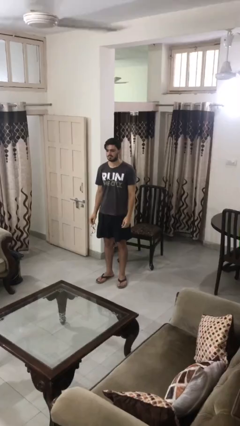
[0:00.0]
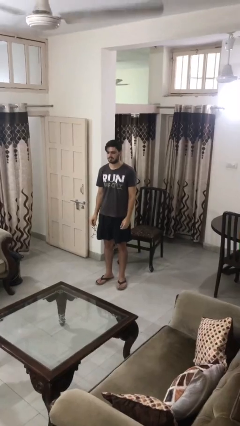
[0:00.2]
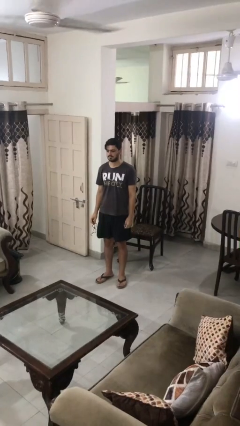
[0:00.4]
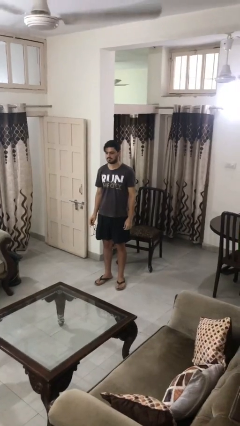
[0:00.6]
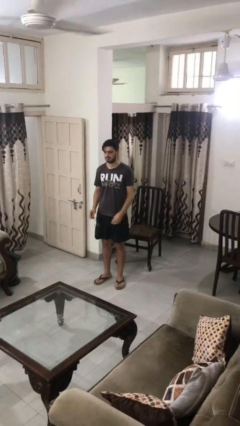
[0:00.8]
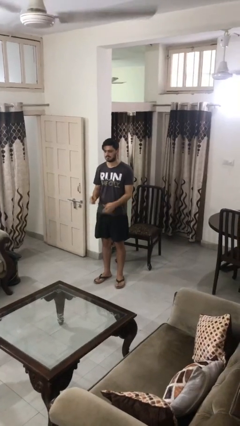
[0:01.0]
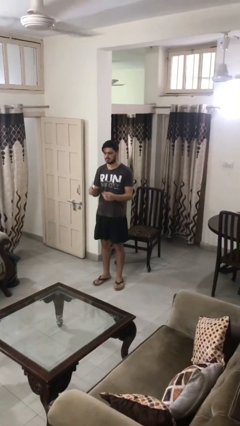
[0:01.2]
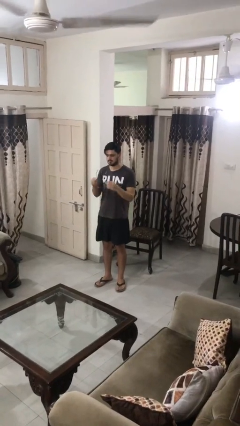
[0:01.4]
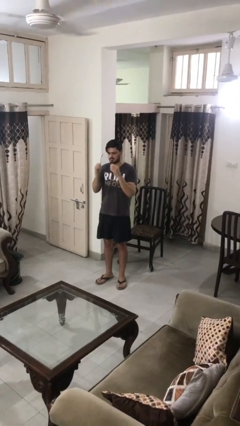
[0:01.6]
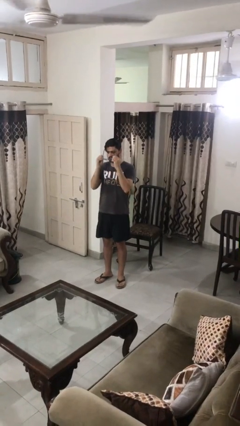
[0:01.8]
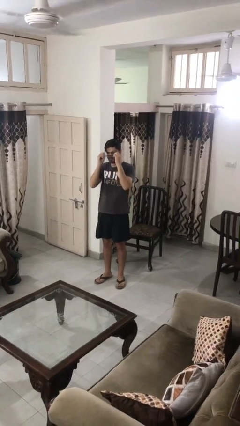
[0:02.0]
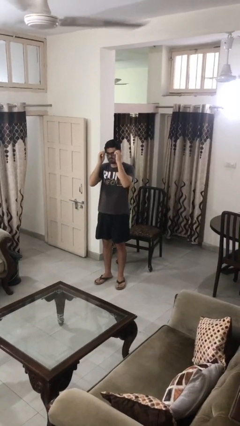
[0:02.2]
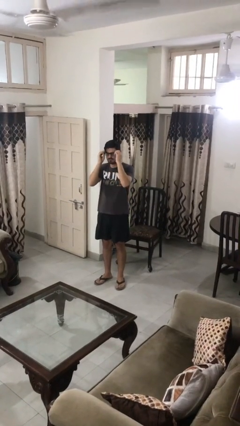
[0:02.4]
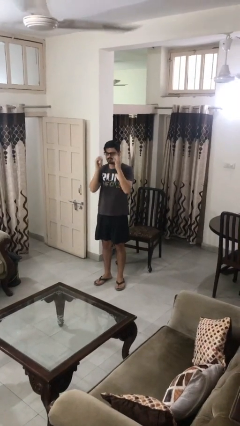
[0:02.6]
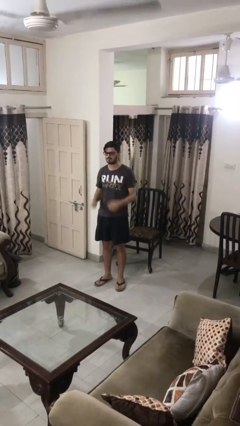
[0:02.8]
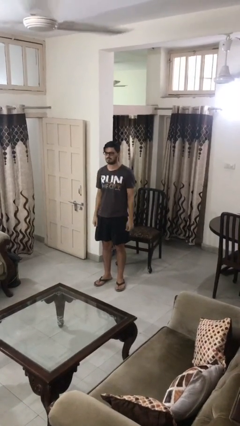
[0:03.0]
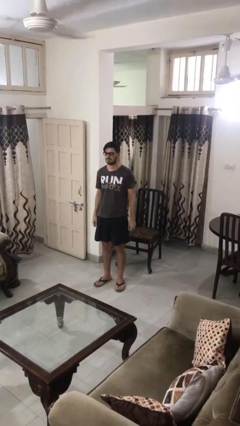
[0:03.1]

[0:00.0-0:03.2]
person puts on glasses

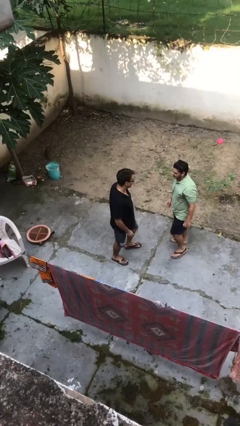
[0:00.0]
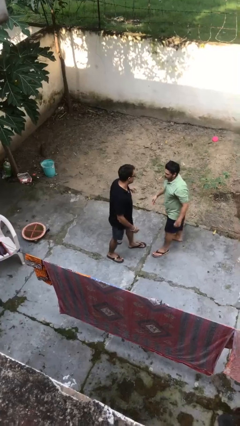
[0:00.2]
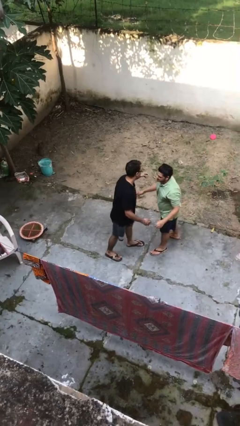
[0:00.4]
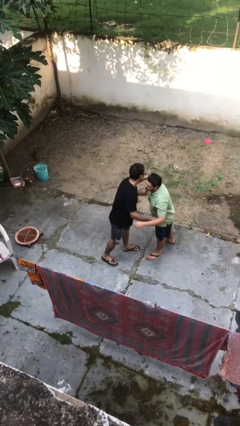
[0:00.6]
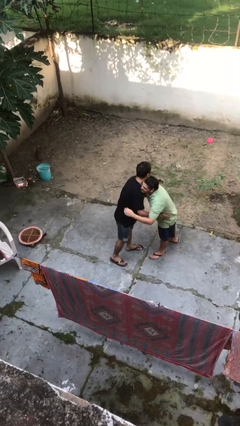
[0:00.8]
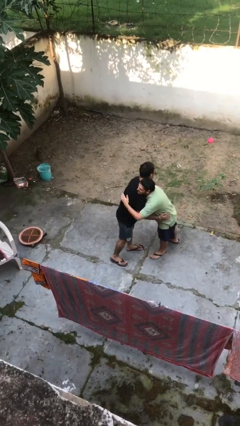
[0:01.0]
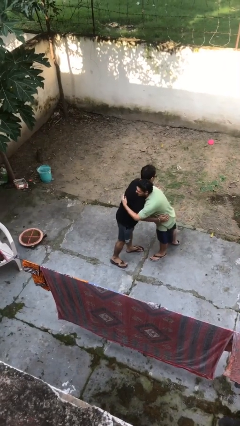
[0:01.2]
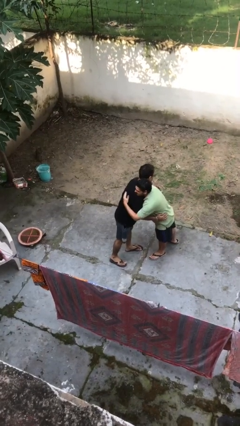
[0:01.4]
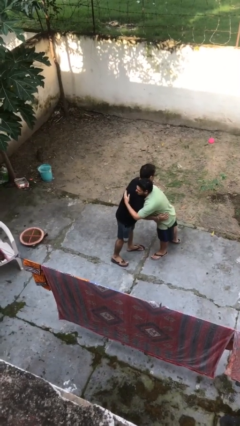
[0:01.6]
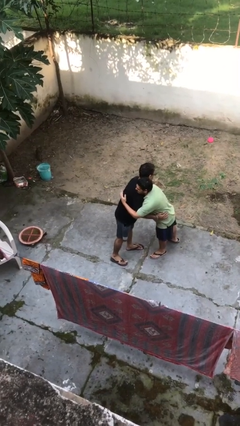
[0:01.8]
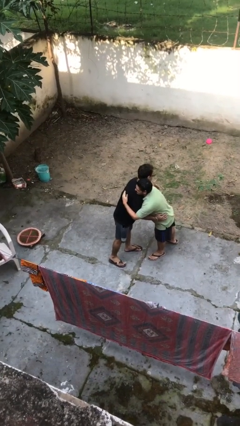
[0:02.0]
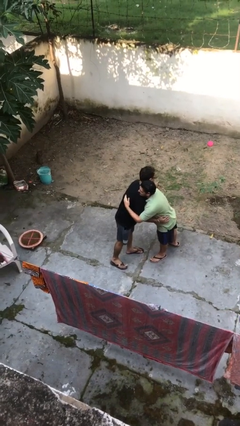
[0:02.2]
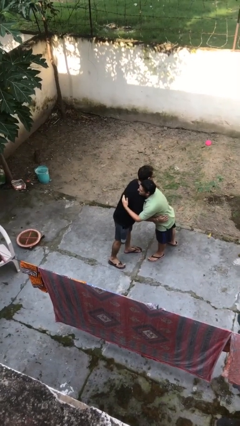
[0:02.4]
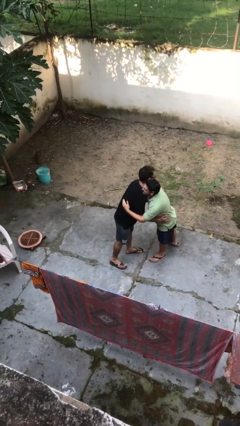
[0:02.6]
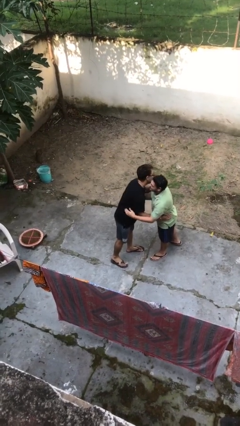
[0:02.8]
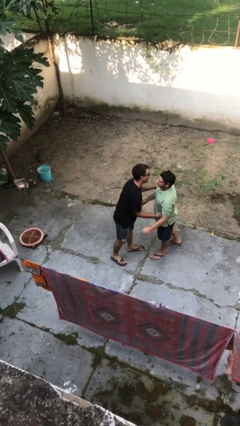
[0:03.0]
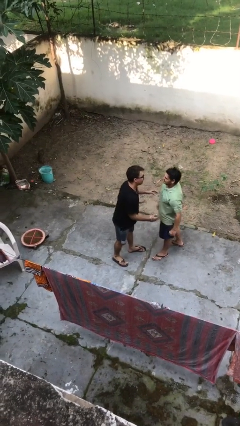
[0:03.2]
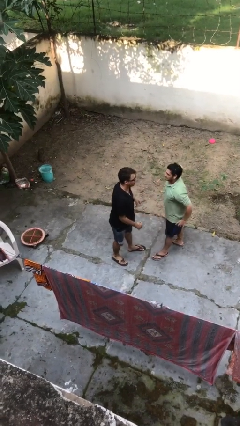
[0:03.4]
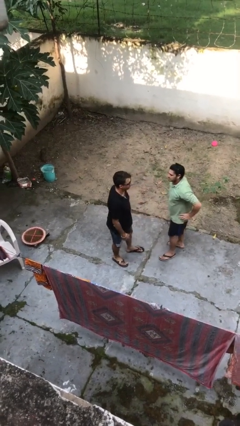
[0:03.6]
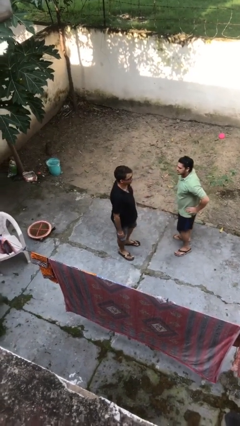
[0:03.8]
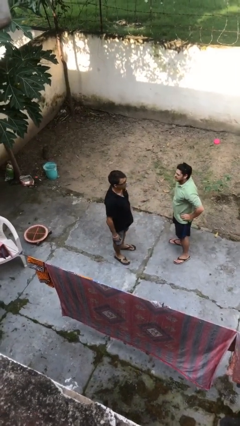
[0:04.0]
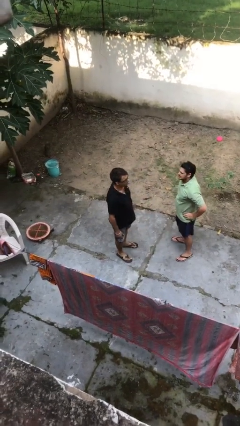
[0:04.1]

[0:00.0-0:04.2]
person embraces person

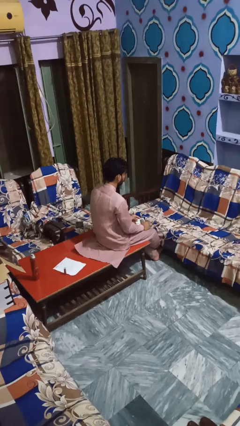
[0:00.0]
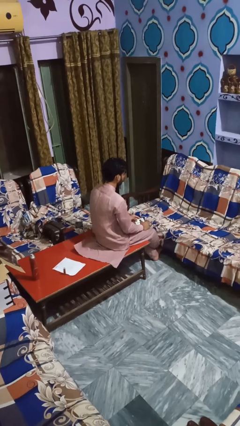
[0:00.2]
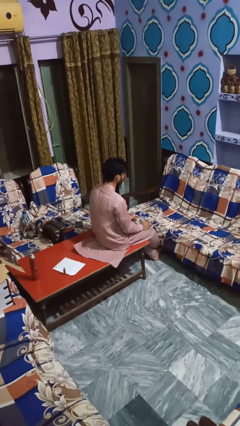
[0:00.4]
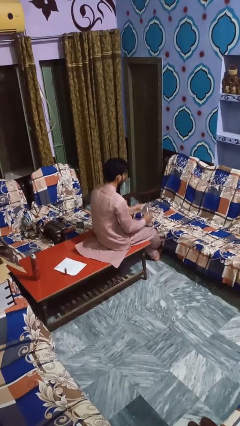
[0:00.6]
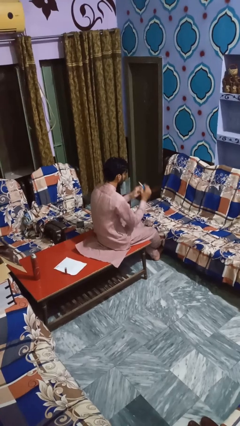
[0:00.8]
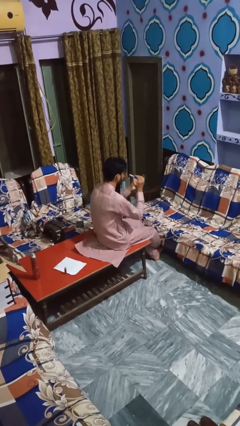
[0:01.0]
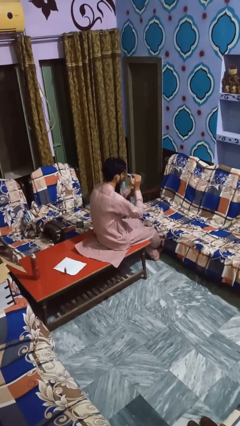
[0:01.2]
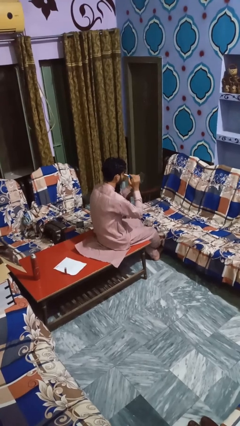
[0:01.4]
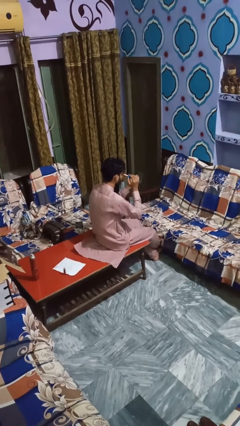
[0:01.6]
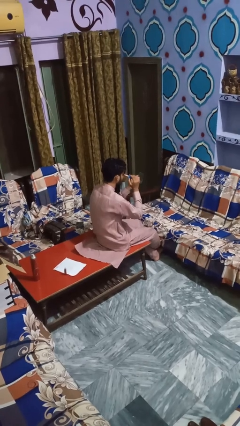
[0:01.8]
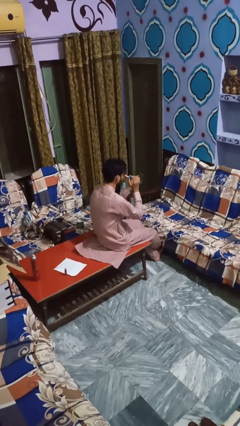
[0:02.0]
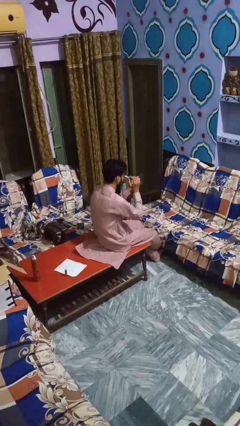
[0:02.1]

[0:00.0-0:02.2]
person applies eye makeup

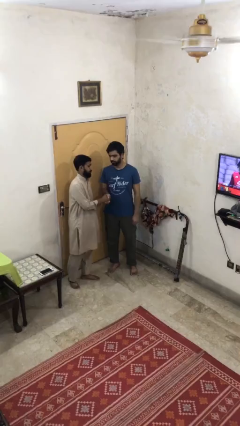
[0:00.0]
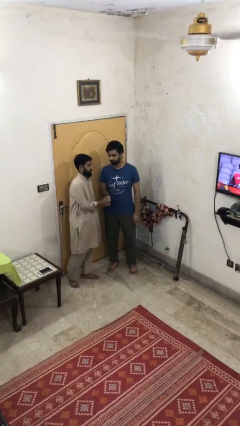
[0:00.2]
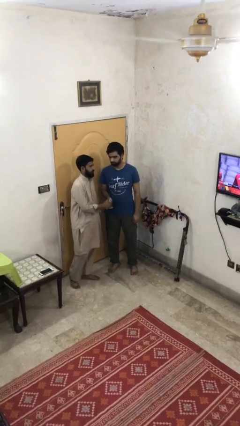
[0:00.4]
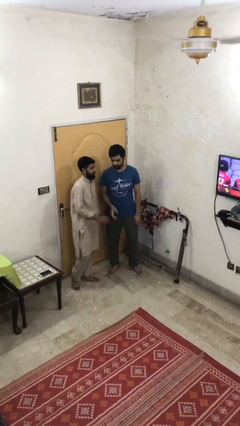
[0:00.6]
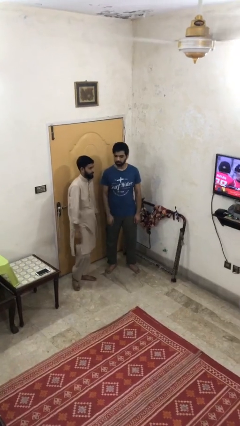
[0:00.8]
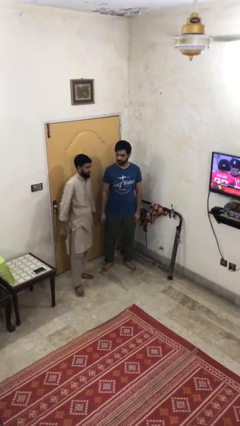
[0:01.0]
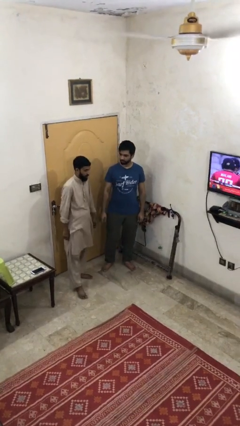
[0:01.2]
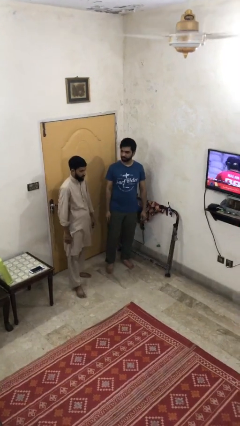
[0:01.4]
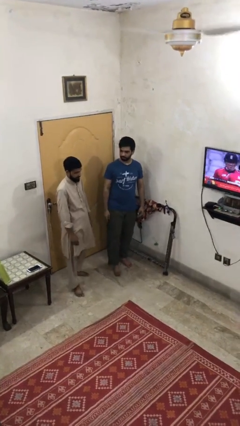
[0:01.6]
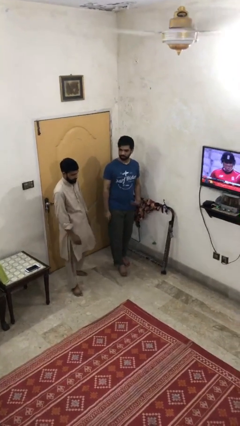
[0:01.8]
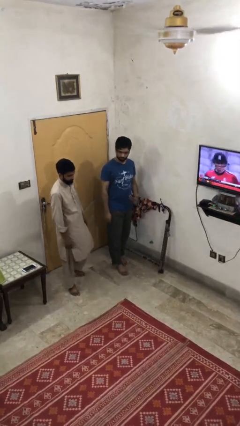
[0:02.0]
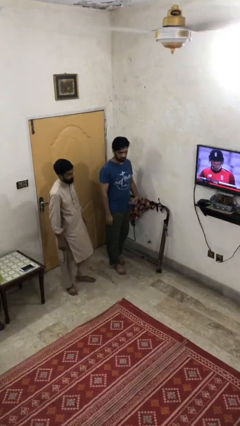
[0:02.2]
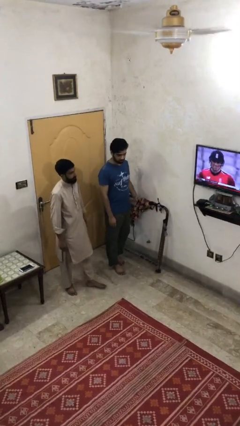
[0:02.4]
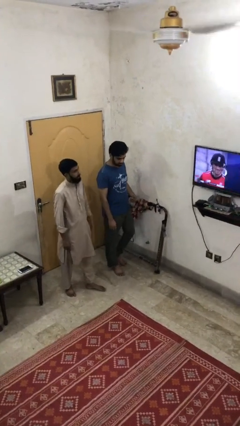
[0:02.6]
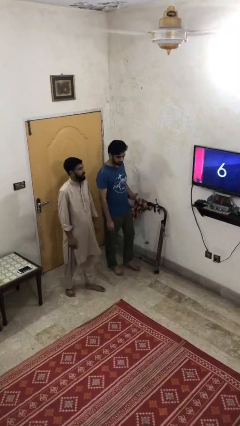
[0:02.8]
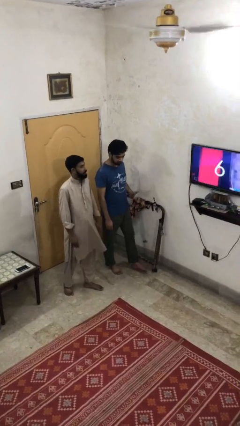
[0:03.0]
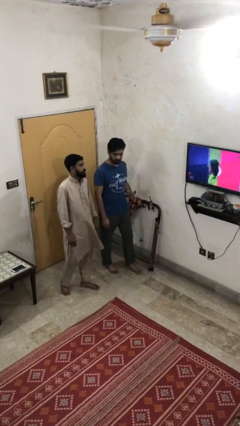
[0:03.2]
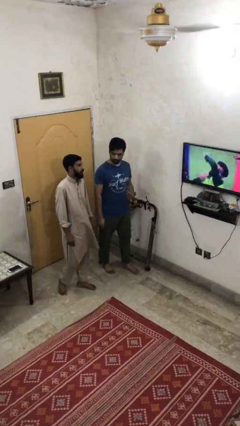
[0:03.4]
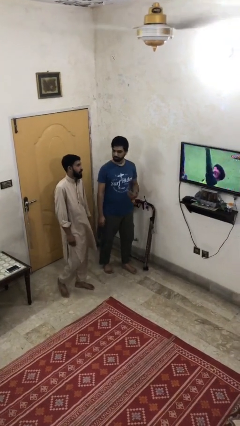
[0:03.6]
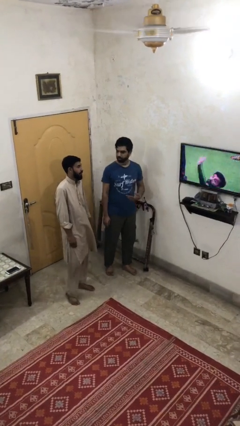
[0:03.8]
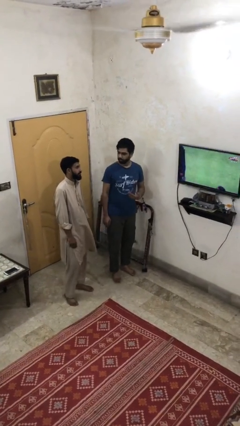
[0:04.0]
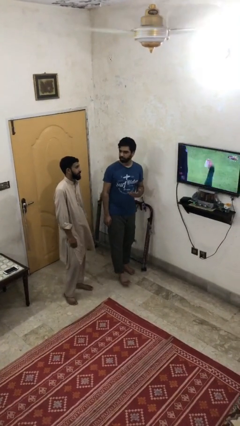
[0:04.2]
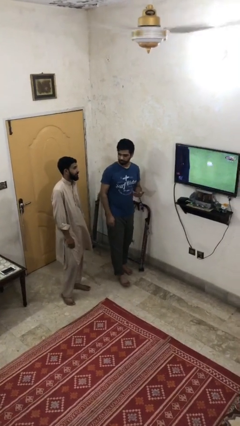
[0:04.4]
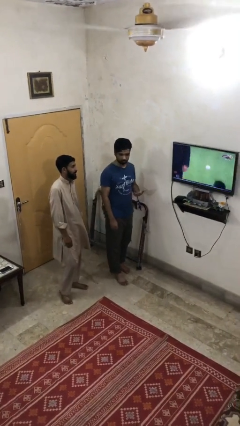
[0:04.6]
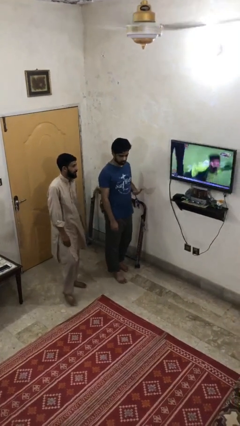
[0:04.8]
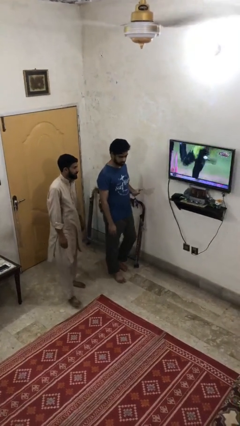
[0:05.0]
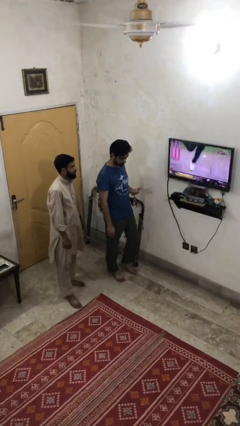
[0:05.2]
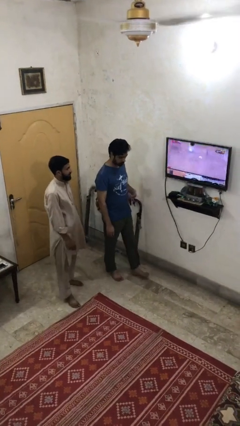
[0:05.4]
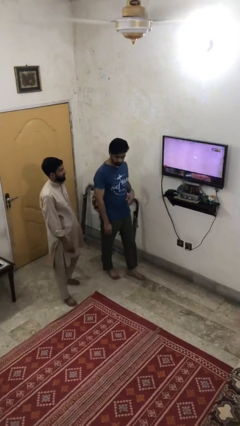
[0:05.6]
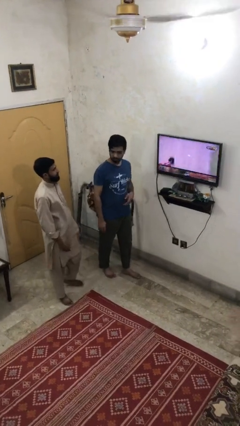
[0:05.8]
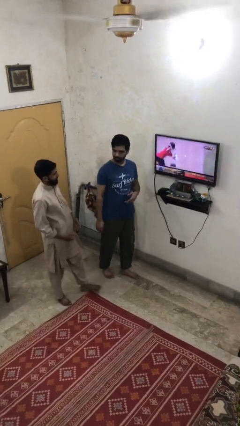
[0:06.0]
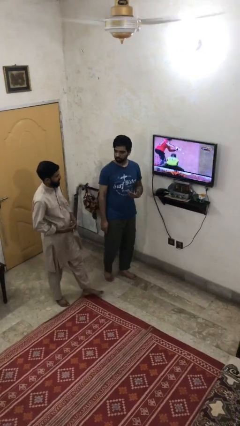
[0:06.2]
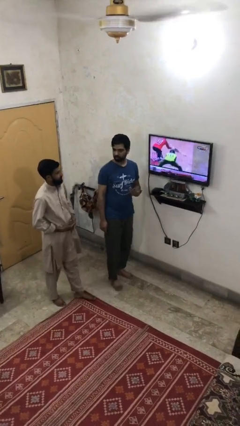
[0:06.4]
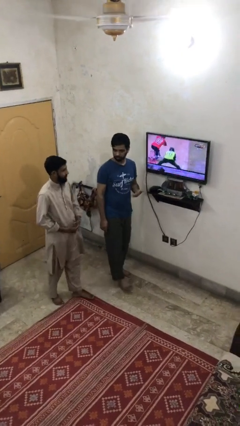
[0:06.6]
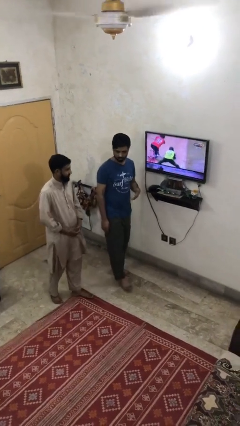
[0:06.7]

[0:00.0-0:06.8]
person talks to person

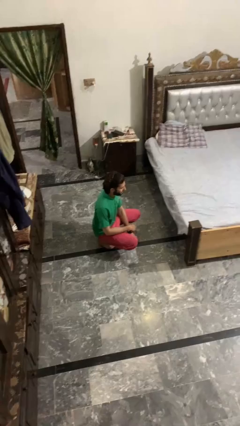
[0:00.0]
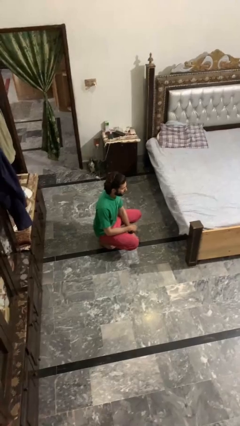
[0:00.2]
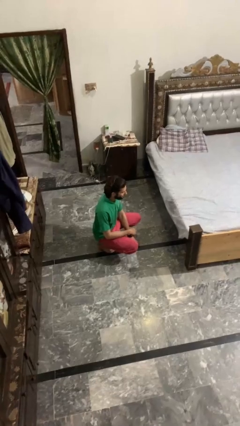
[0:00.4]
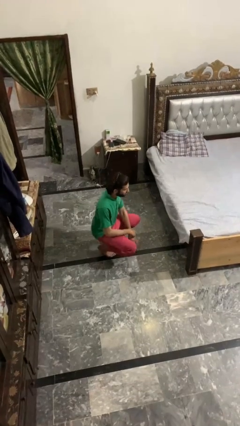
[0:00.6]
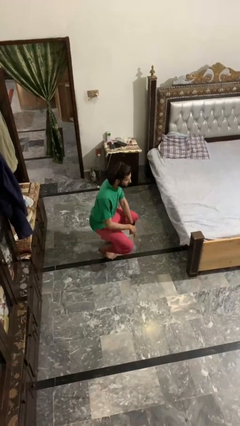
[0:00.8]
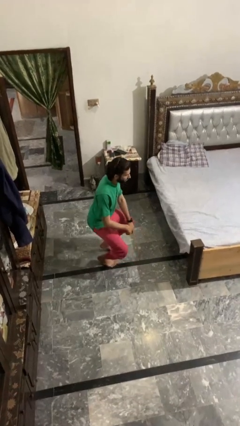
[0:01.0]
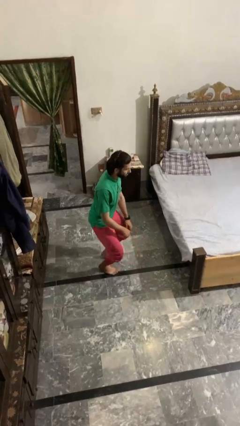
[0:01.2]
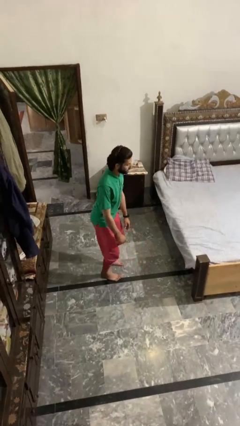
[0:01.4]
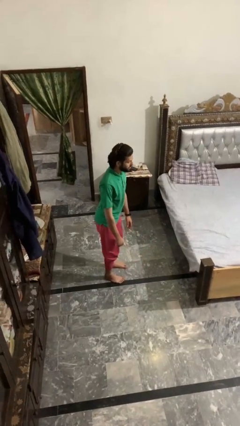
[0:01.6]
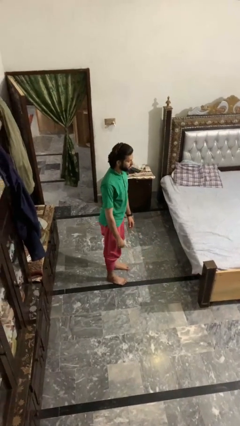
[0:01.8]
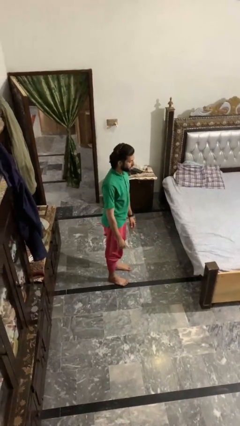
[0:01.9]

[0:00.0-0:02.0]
person stands up
